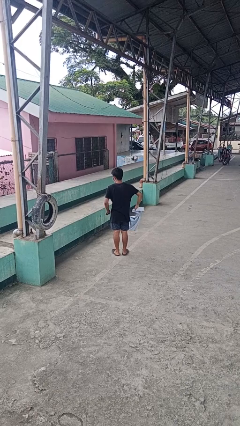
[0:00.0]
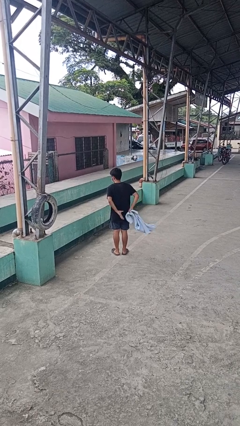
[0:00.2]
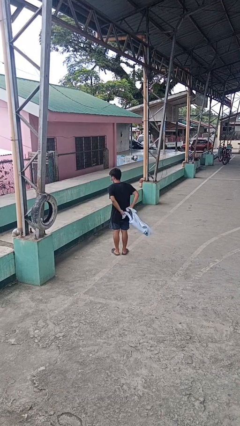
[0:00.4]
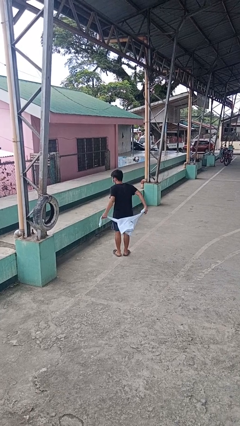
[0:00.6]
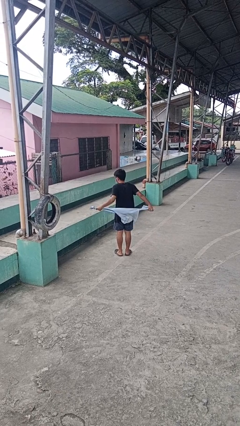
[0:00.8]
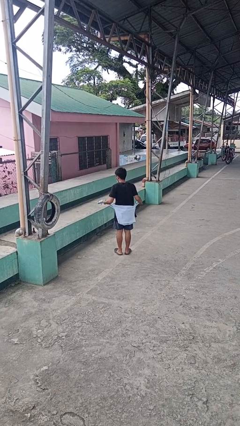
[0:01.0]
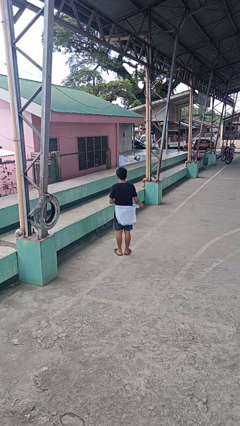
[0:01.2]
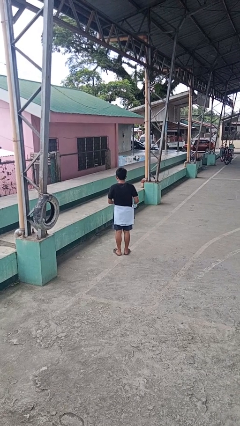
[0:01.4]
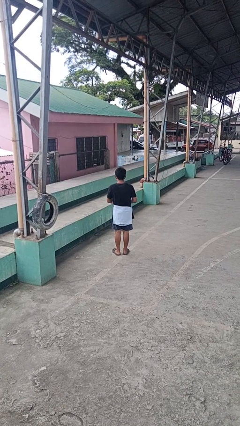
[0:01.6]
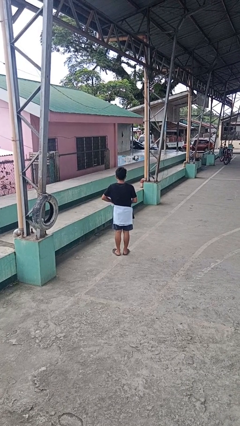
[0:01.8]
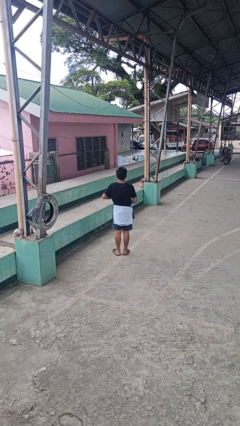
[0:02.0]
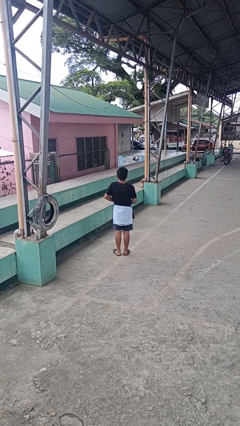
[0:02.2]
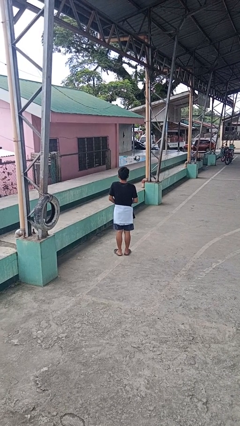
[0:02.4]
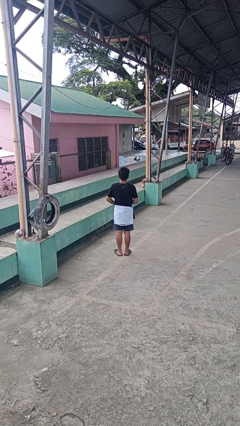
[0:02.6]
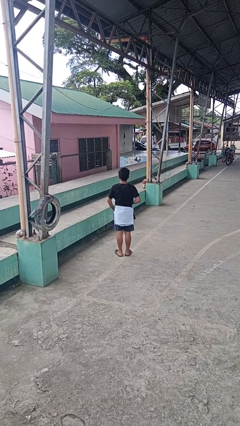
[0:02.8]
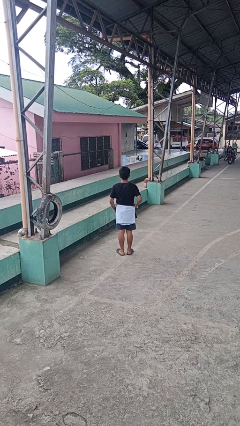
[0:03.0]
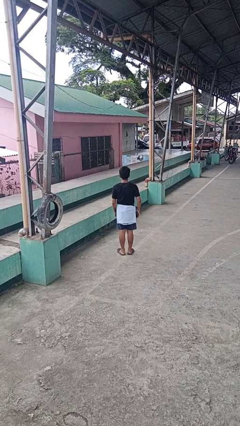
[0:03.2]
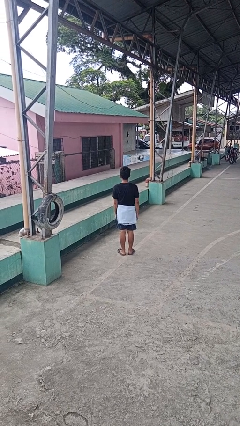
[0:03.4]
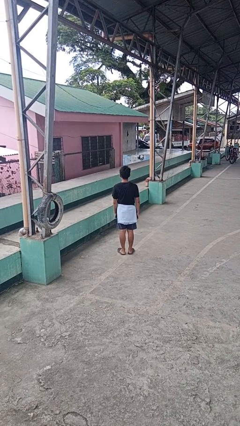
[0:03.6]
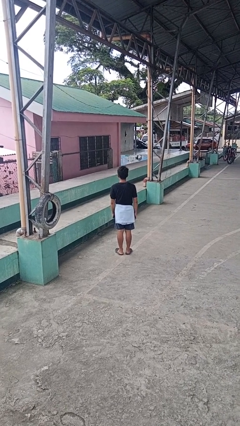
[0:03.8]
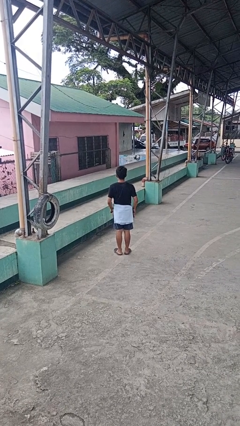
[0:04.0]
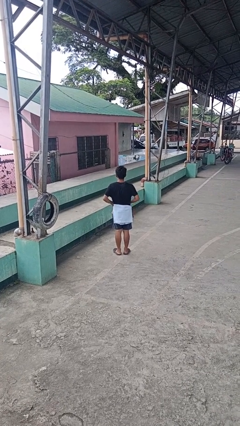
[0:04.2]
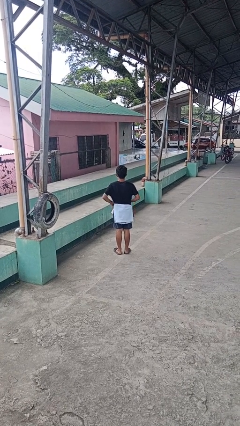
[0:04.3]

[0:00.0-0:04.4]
person ties jacket around waist

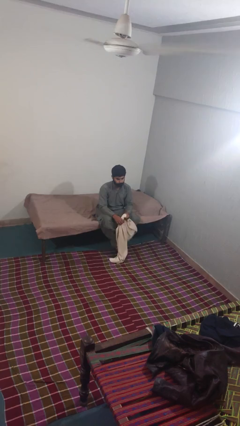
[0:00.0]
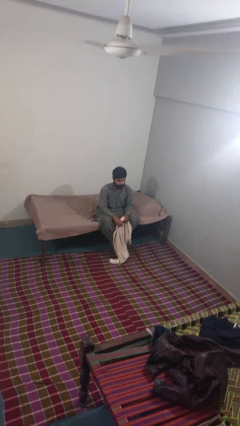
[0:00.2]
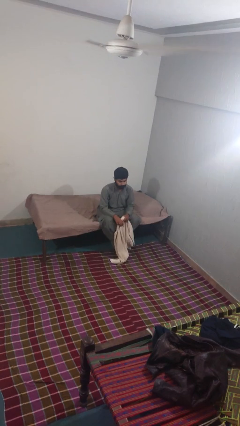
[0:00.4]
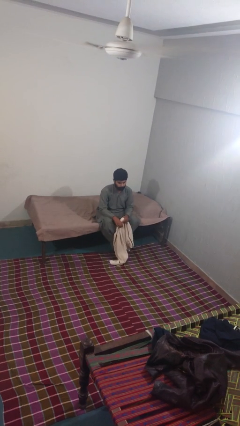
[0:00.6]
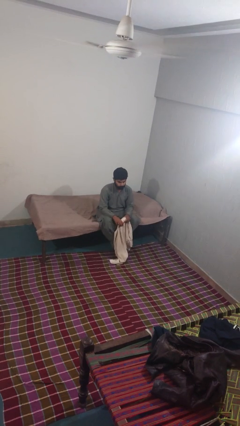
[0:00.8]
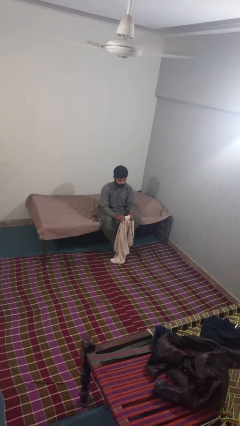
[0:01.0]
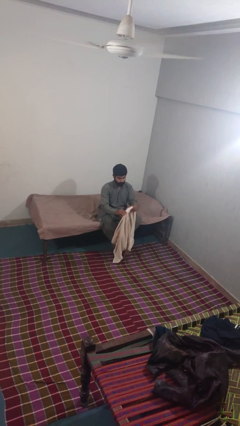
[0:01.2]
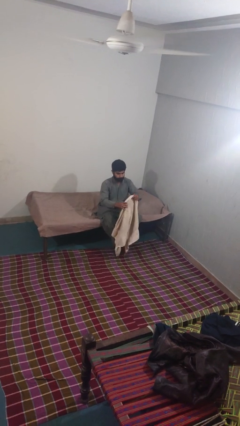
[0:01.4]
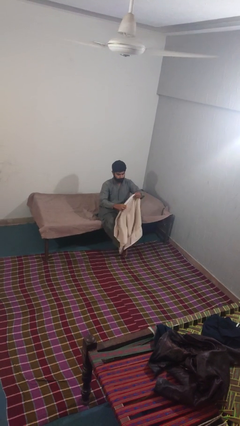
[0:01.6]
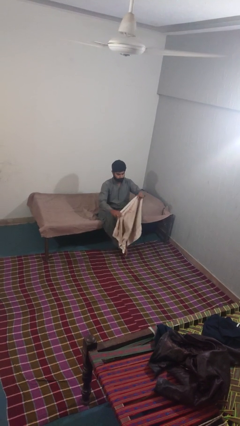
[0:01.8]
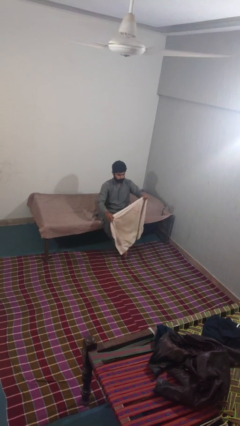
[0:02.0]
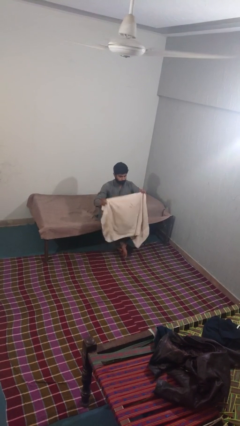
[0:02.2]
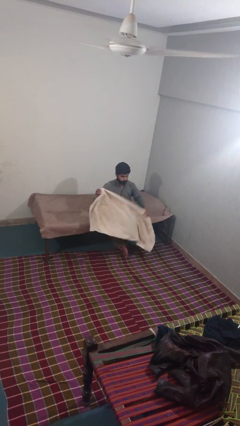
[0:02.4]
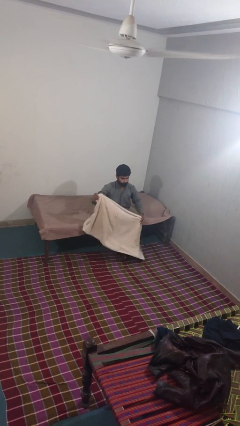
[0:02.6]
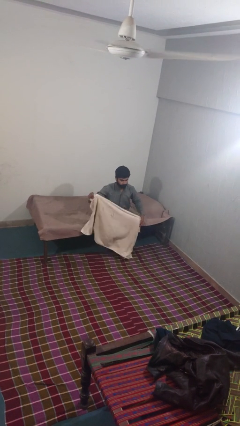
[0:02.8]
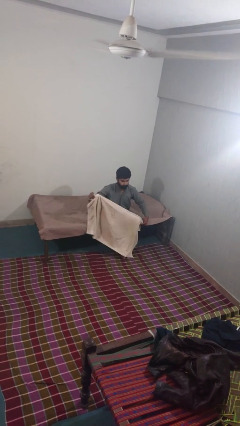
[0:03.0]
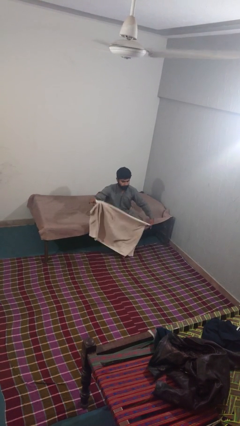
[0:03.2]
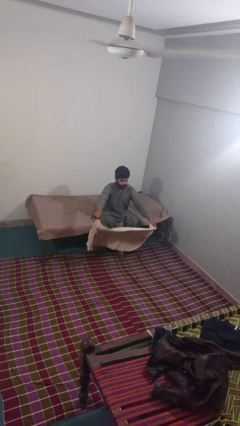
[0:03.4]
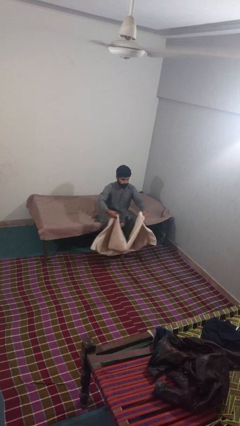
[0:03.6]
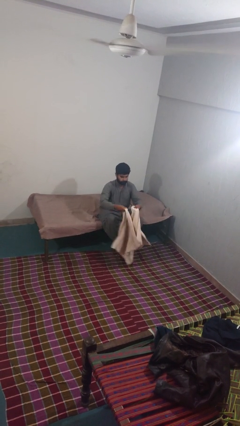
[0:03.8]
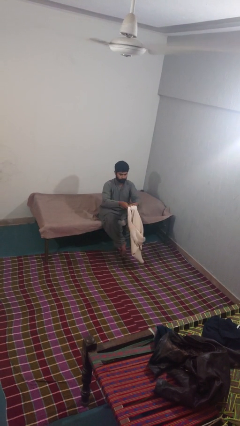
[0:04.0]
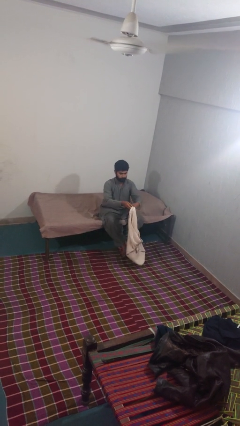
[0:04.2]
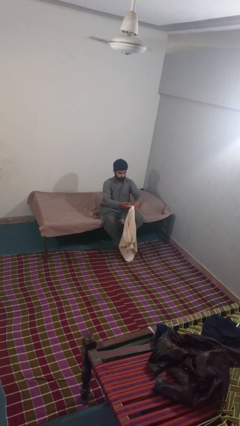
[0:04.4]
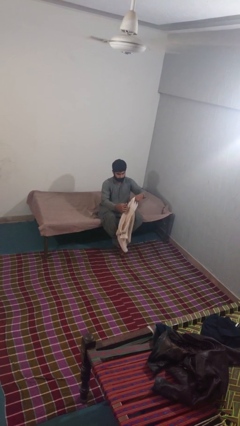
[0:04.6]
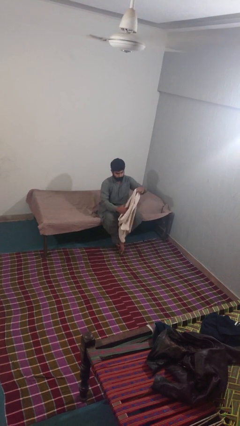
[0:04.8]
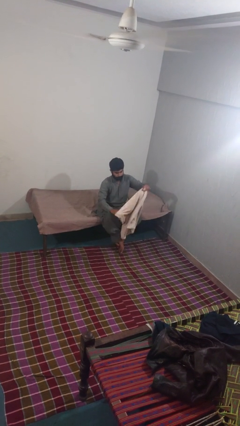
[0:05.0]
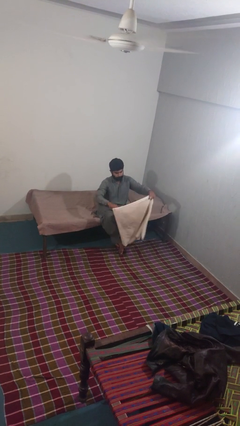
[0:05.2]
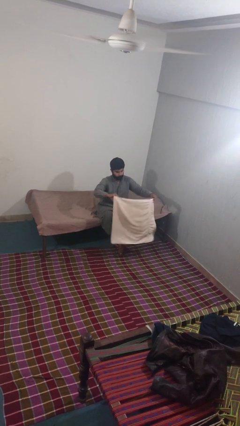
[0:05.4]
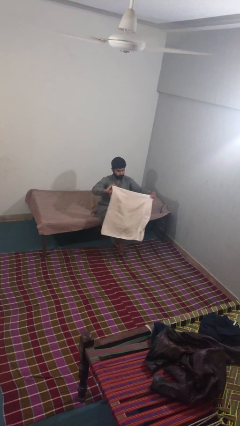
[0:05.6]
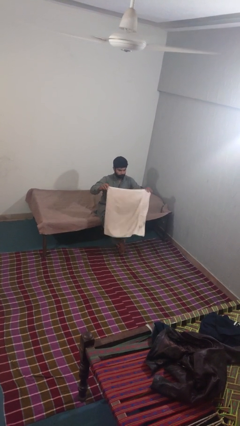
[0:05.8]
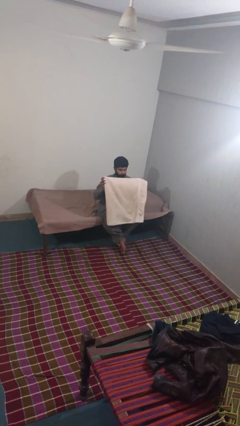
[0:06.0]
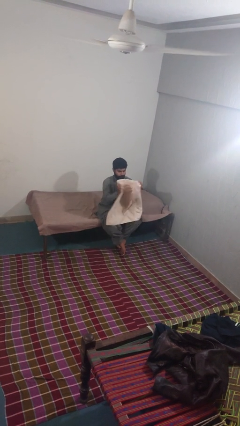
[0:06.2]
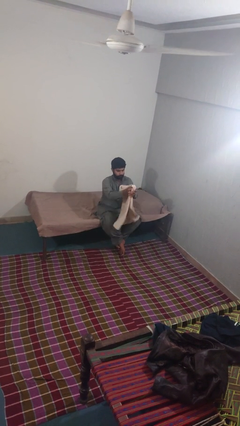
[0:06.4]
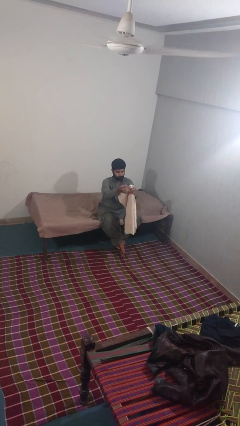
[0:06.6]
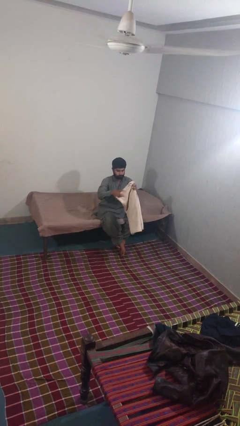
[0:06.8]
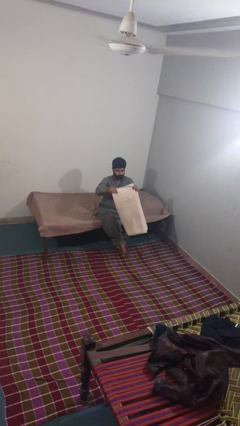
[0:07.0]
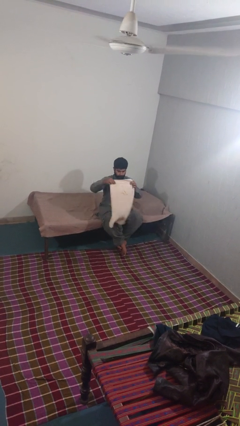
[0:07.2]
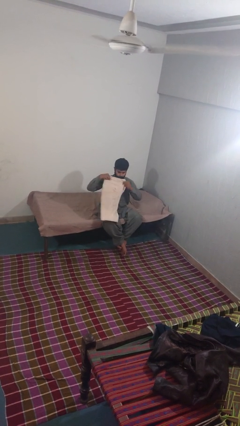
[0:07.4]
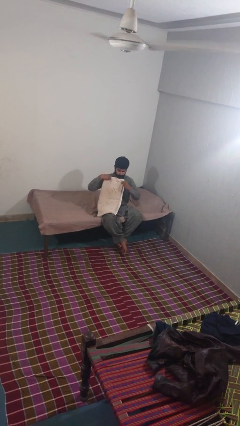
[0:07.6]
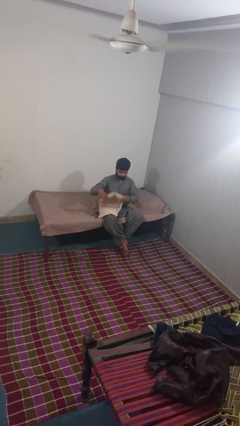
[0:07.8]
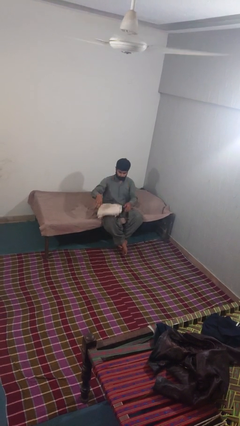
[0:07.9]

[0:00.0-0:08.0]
person folds towel

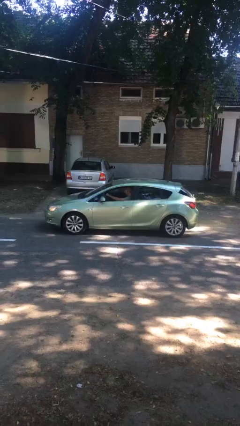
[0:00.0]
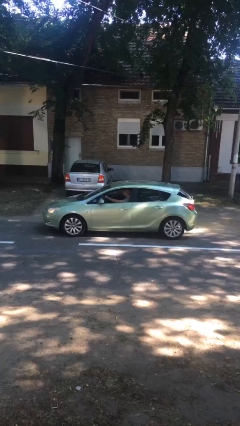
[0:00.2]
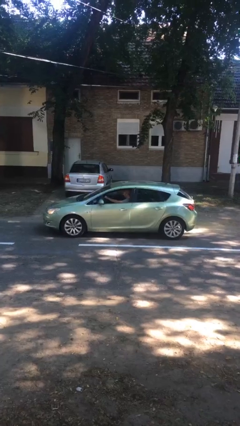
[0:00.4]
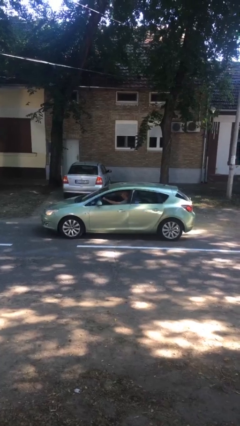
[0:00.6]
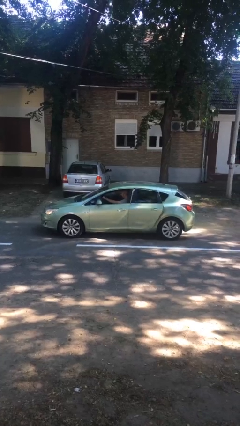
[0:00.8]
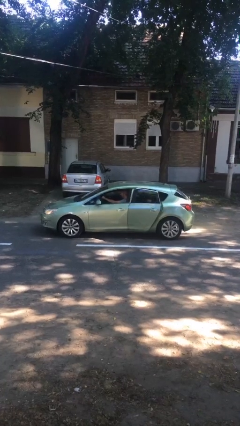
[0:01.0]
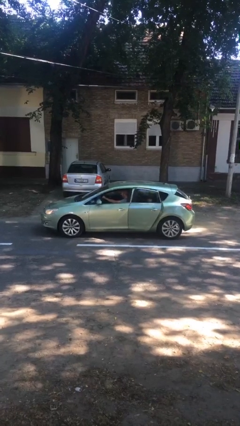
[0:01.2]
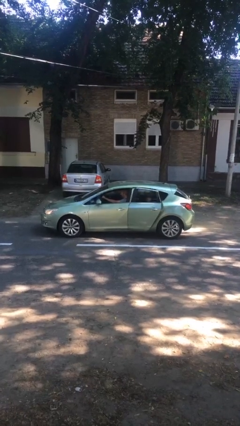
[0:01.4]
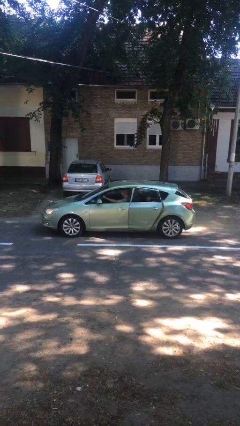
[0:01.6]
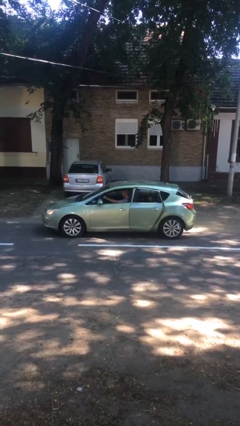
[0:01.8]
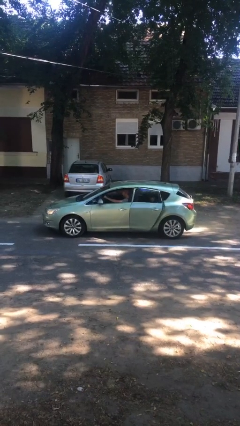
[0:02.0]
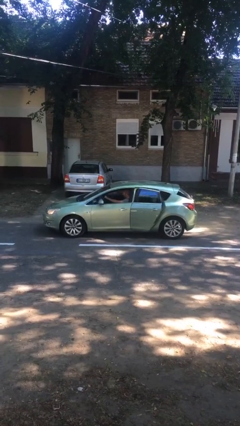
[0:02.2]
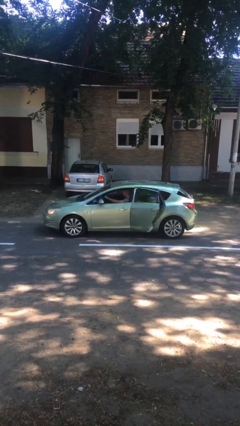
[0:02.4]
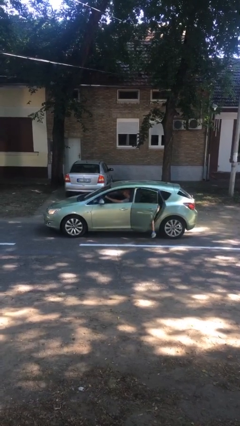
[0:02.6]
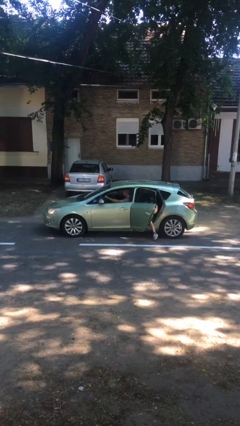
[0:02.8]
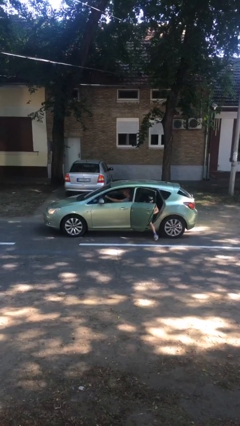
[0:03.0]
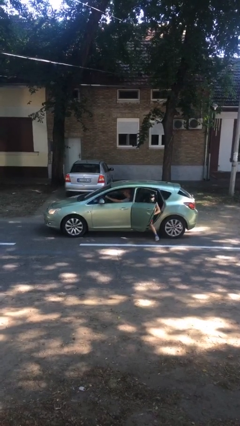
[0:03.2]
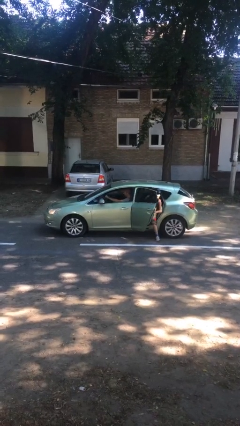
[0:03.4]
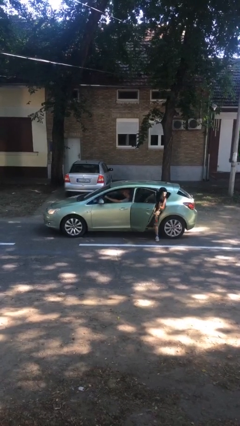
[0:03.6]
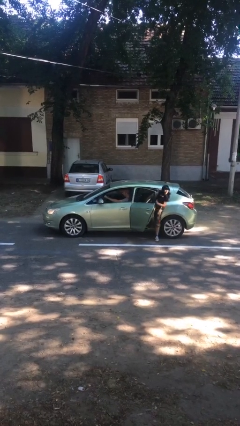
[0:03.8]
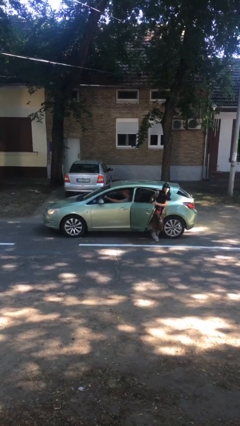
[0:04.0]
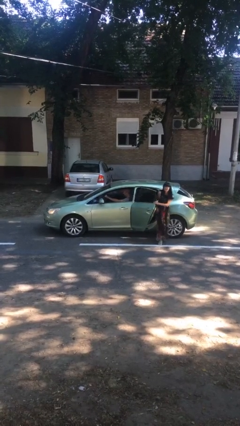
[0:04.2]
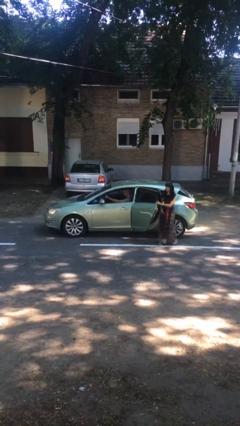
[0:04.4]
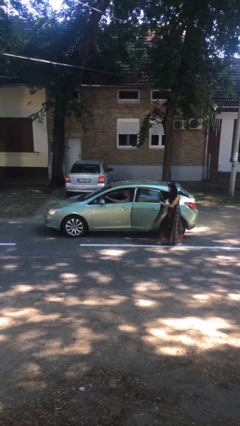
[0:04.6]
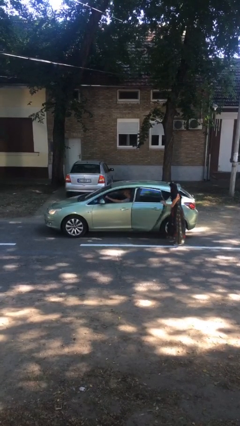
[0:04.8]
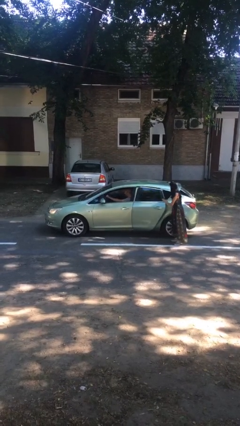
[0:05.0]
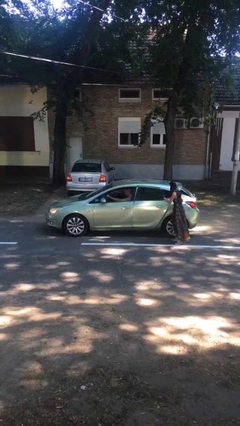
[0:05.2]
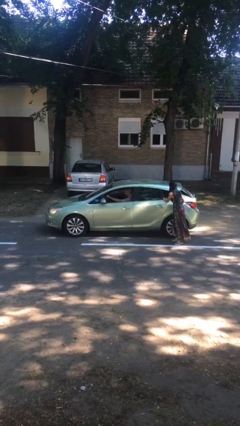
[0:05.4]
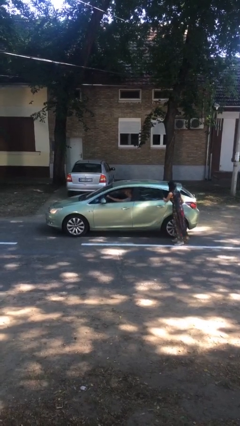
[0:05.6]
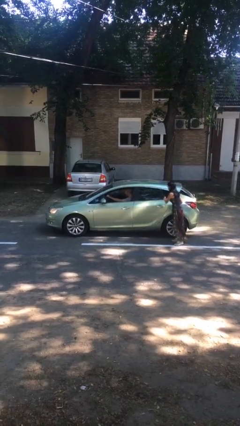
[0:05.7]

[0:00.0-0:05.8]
car drops off person

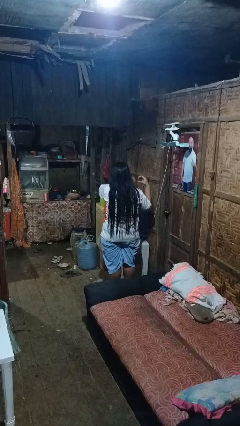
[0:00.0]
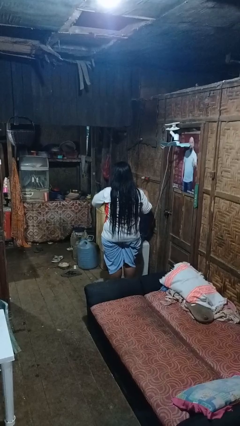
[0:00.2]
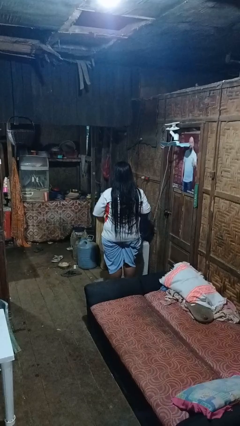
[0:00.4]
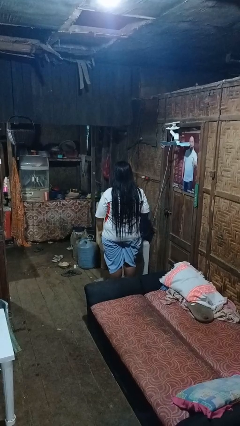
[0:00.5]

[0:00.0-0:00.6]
person gestures heart
